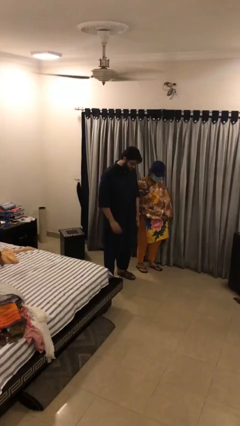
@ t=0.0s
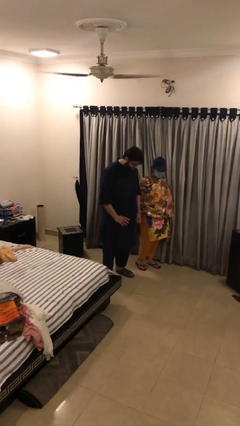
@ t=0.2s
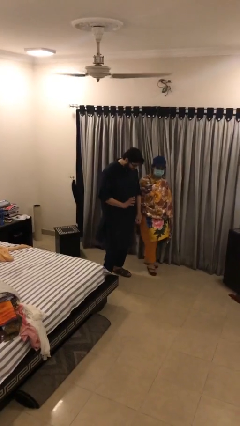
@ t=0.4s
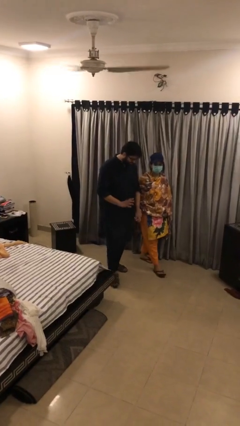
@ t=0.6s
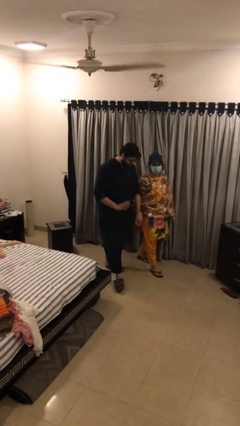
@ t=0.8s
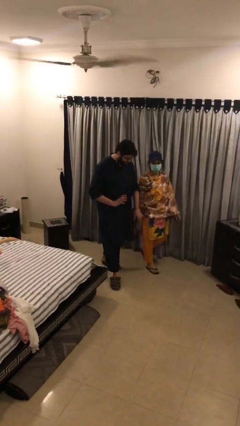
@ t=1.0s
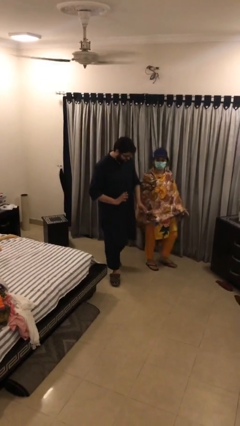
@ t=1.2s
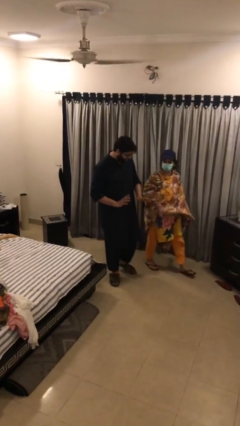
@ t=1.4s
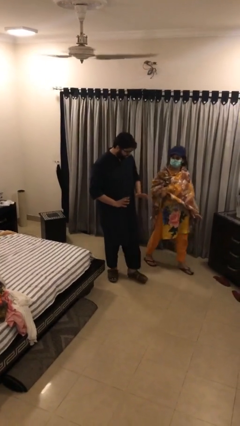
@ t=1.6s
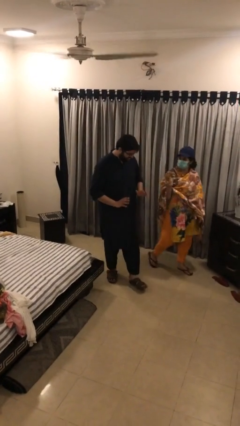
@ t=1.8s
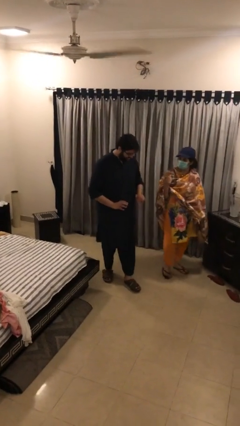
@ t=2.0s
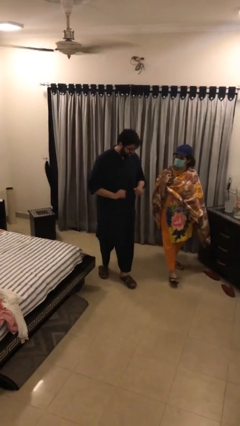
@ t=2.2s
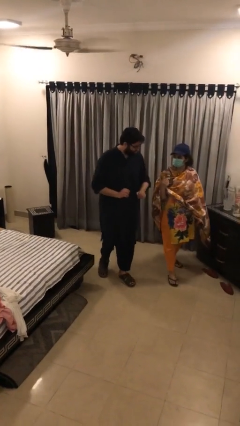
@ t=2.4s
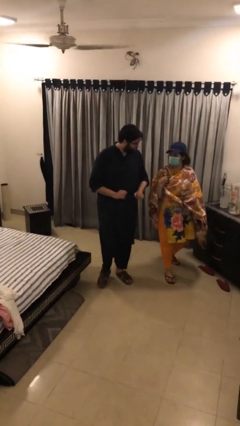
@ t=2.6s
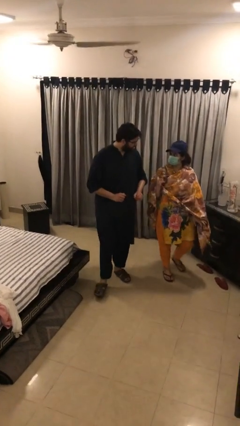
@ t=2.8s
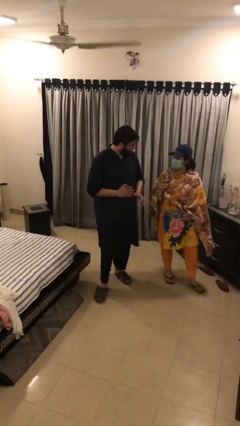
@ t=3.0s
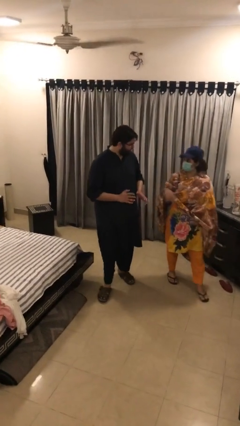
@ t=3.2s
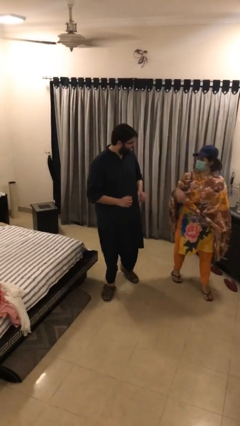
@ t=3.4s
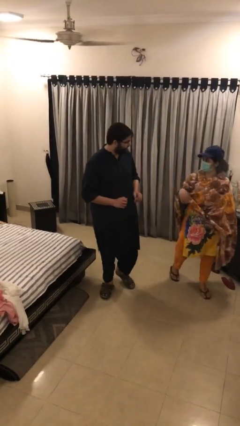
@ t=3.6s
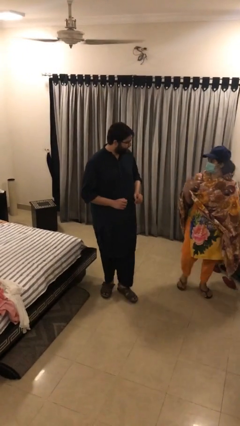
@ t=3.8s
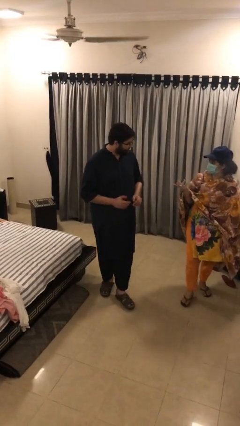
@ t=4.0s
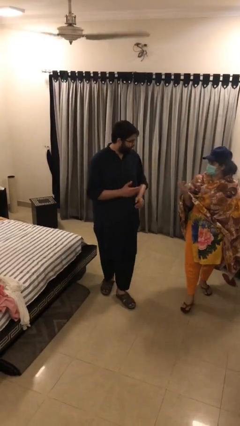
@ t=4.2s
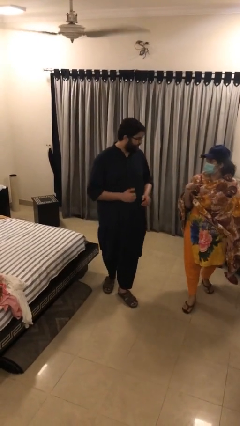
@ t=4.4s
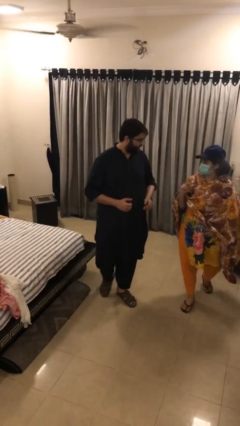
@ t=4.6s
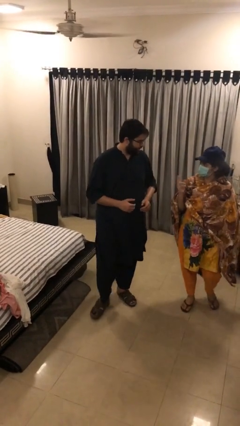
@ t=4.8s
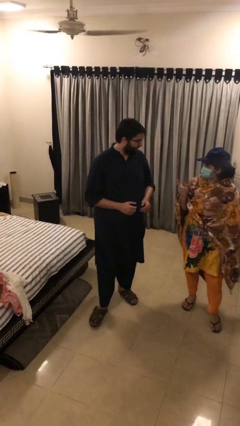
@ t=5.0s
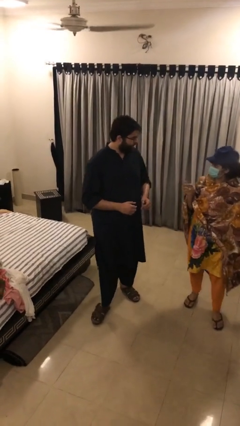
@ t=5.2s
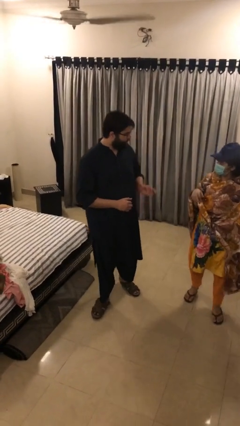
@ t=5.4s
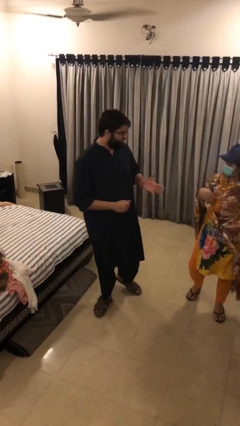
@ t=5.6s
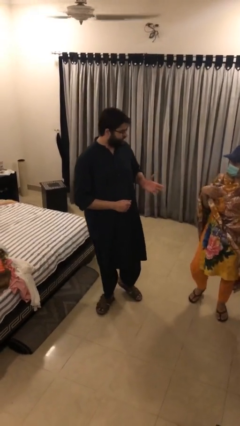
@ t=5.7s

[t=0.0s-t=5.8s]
person talks to person

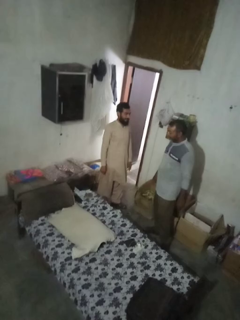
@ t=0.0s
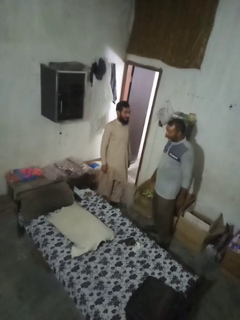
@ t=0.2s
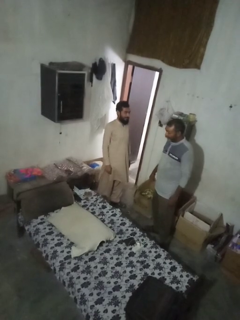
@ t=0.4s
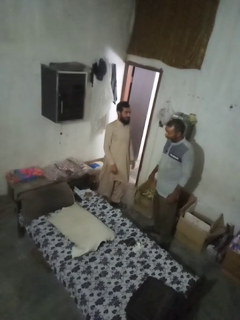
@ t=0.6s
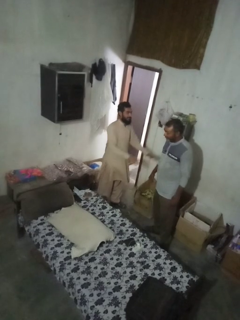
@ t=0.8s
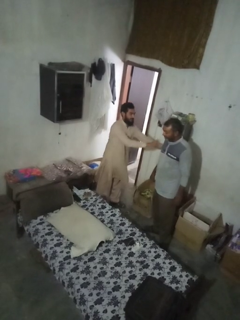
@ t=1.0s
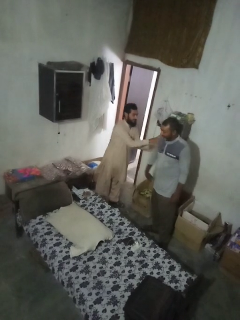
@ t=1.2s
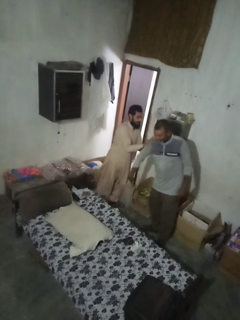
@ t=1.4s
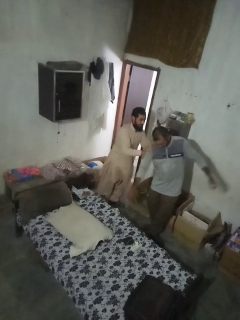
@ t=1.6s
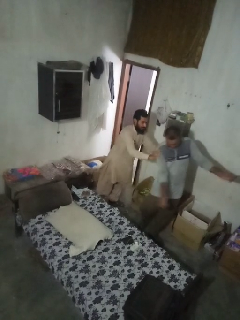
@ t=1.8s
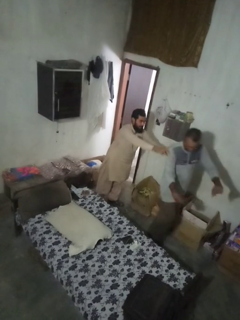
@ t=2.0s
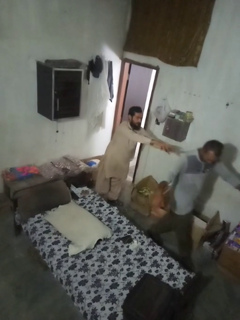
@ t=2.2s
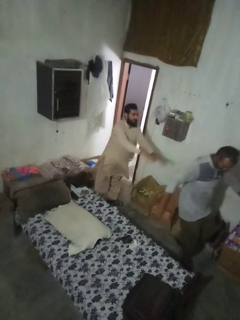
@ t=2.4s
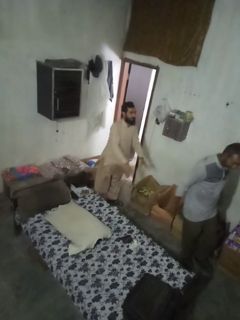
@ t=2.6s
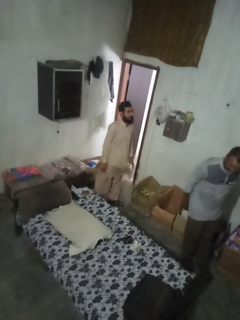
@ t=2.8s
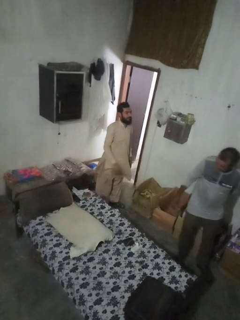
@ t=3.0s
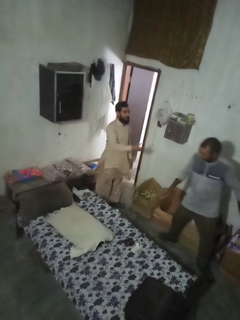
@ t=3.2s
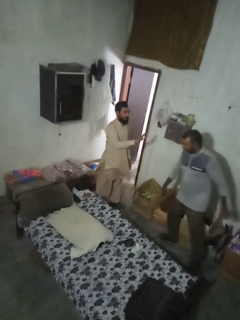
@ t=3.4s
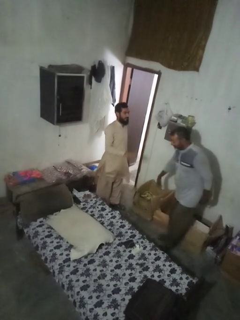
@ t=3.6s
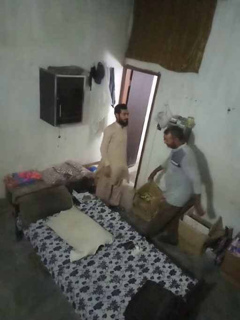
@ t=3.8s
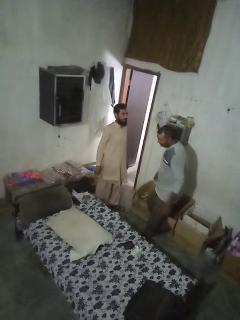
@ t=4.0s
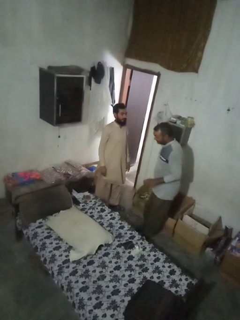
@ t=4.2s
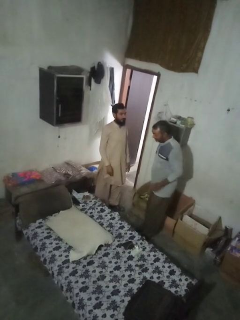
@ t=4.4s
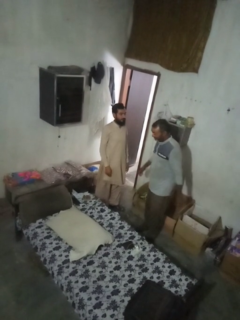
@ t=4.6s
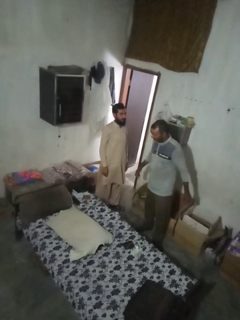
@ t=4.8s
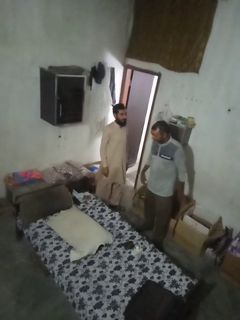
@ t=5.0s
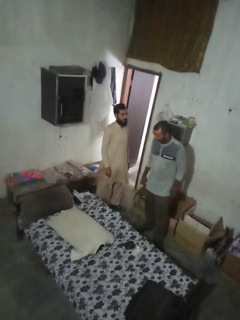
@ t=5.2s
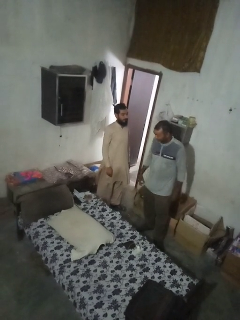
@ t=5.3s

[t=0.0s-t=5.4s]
person shoves person

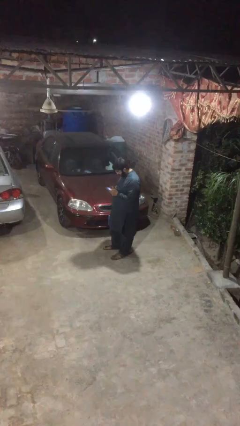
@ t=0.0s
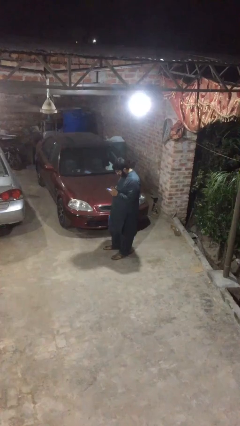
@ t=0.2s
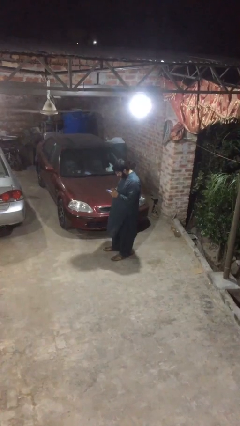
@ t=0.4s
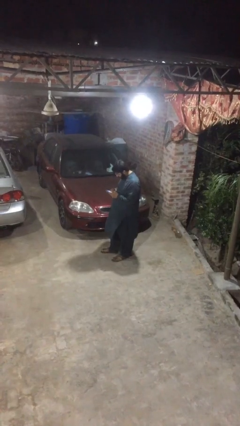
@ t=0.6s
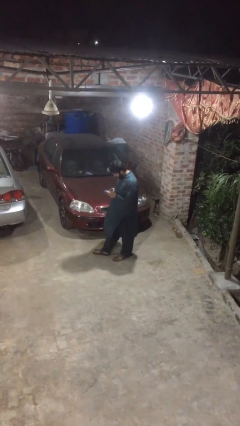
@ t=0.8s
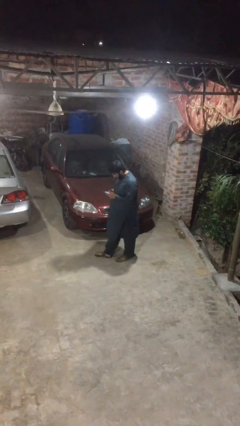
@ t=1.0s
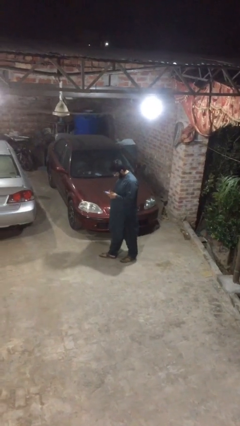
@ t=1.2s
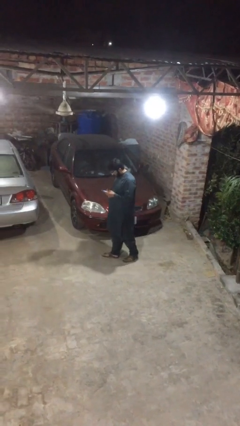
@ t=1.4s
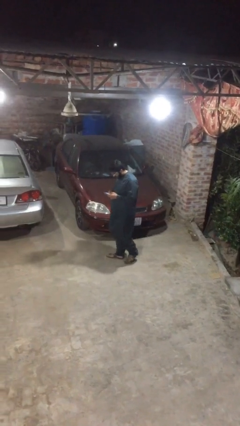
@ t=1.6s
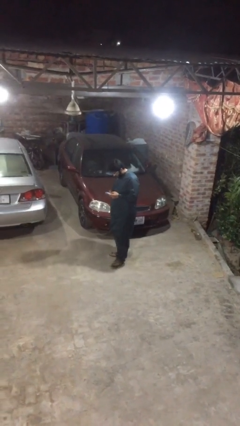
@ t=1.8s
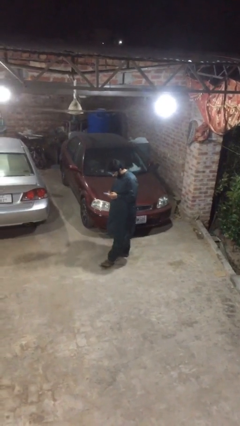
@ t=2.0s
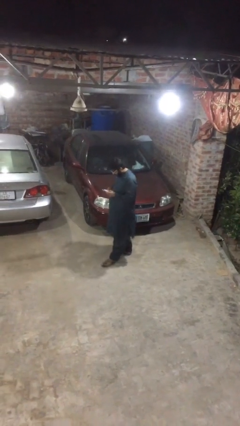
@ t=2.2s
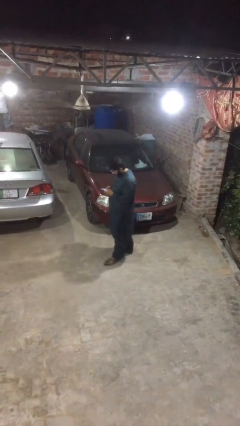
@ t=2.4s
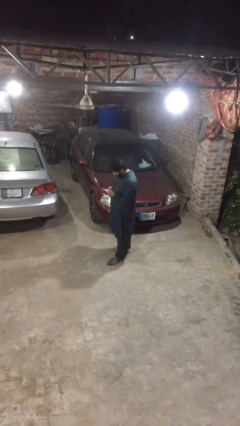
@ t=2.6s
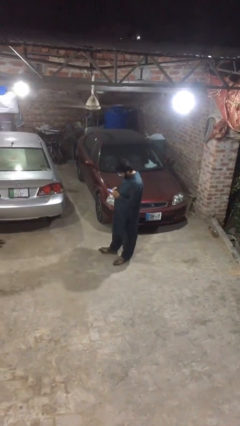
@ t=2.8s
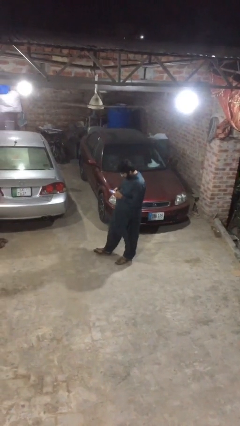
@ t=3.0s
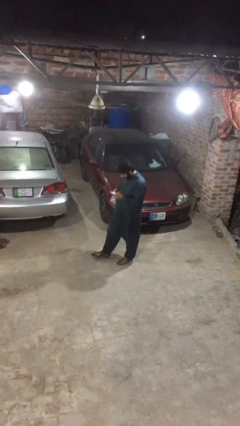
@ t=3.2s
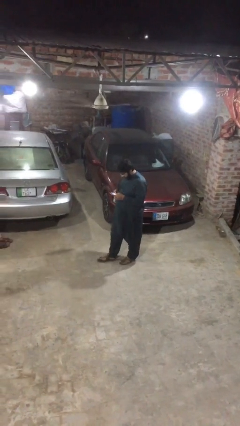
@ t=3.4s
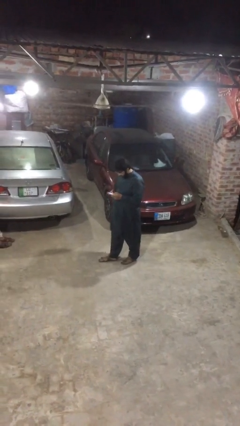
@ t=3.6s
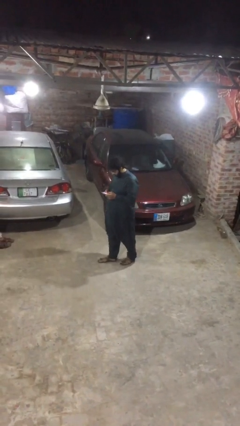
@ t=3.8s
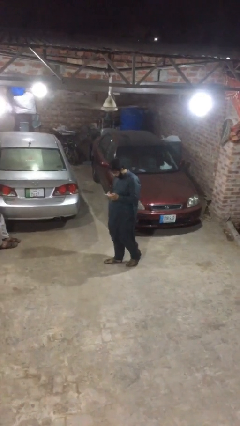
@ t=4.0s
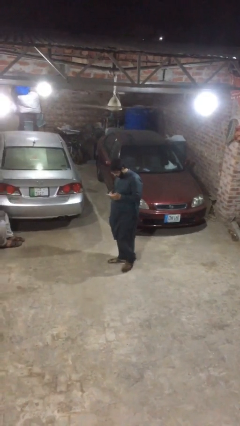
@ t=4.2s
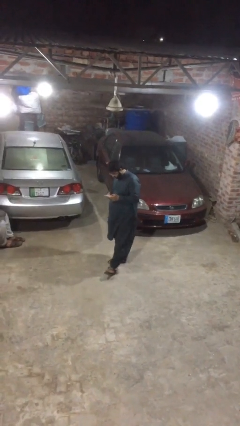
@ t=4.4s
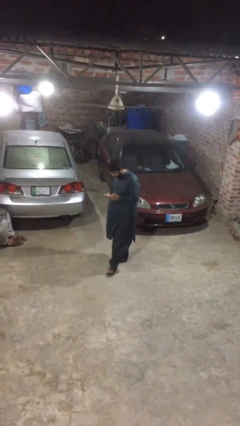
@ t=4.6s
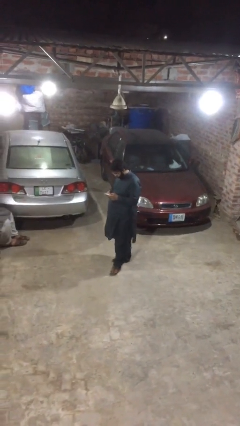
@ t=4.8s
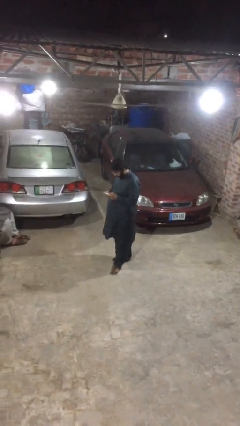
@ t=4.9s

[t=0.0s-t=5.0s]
person texts on phone

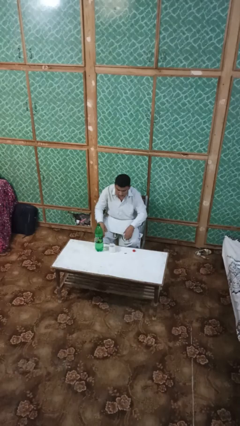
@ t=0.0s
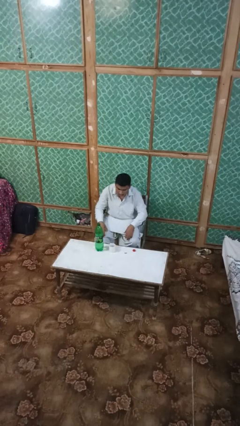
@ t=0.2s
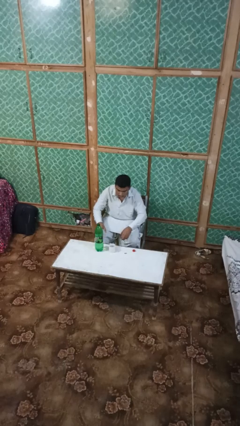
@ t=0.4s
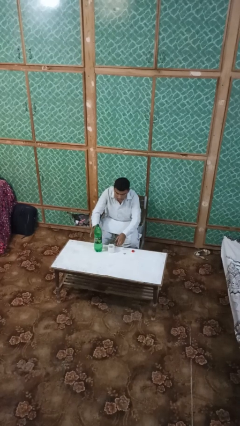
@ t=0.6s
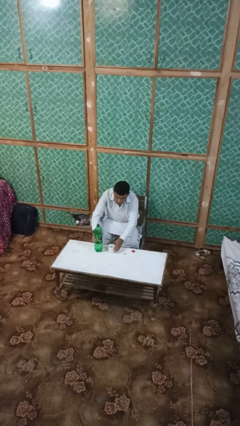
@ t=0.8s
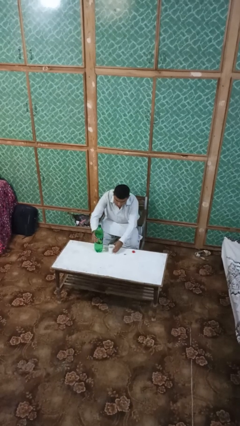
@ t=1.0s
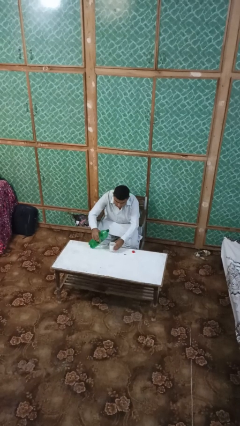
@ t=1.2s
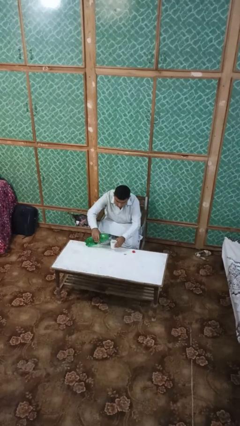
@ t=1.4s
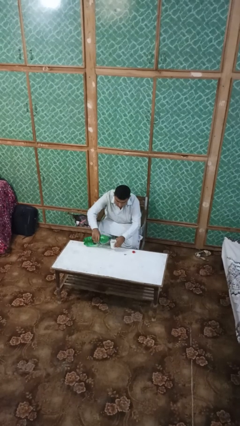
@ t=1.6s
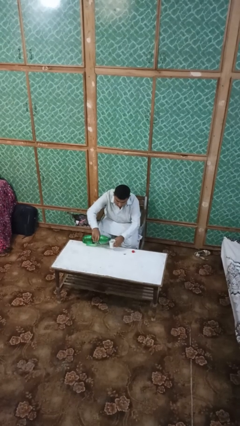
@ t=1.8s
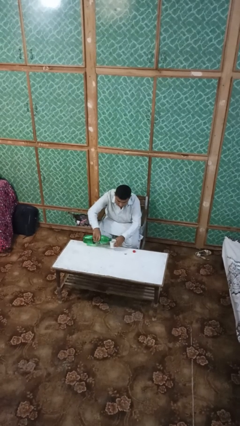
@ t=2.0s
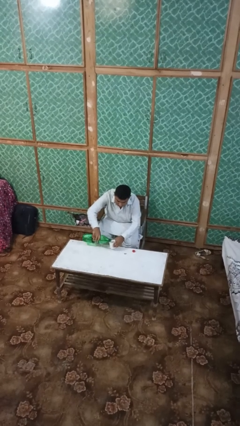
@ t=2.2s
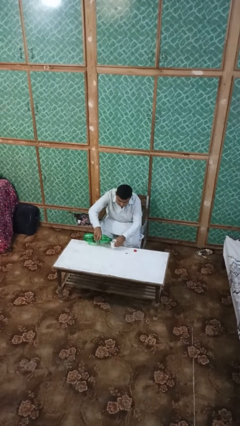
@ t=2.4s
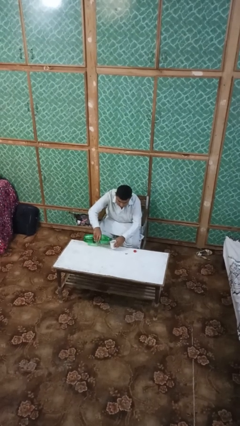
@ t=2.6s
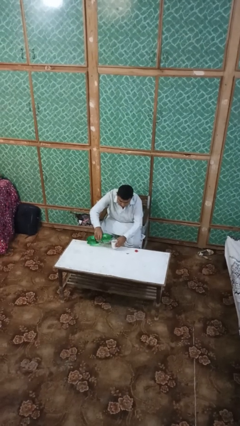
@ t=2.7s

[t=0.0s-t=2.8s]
person pours liquid into cup

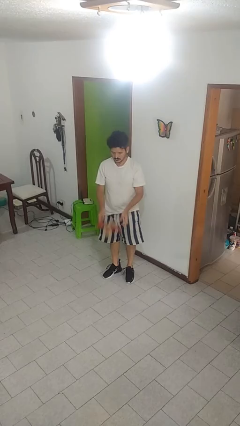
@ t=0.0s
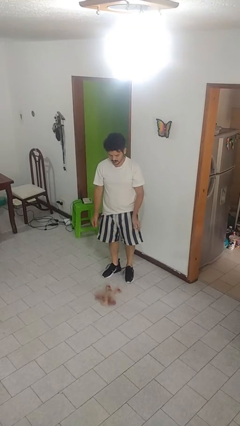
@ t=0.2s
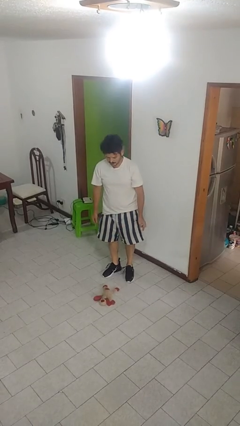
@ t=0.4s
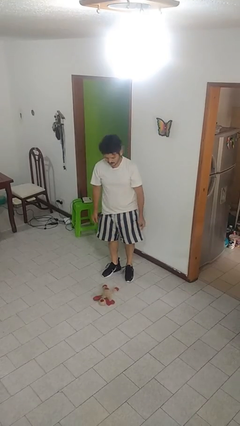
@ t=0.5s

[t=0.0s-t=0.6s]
person throws object to ground
